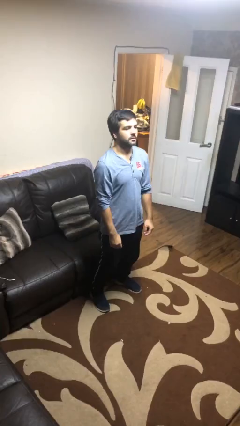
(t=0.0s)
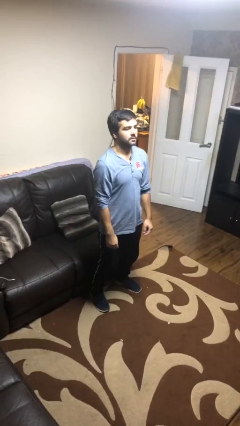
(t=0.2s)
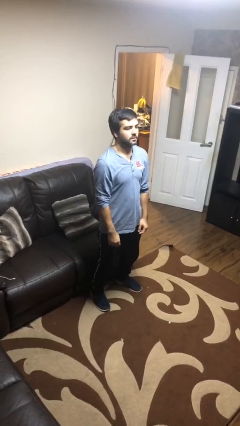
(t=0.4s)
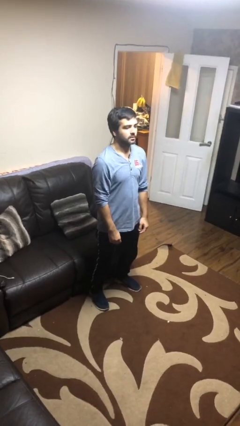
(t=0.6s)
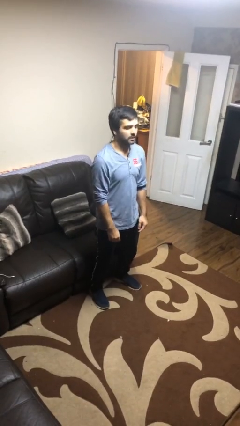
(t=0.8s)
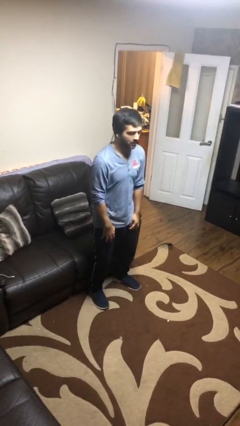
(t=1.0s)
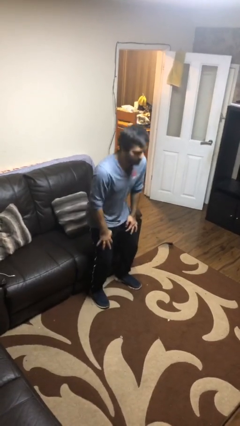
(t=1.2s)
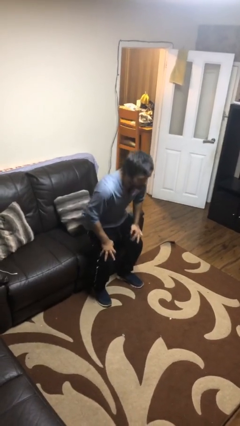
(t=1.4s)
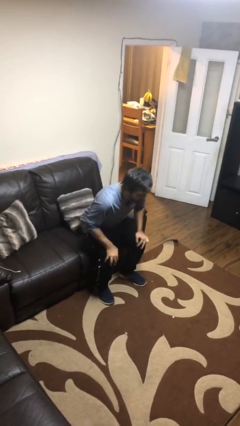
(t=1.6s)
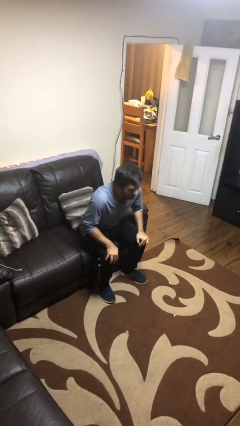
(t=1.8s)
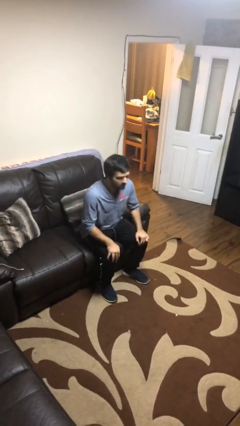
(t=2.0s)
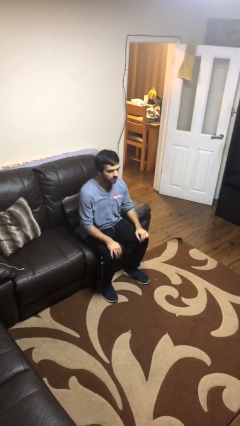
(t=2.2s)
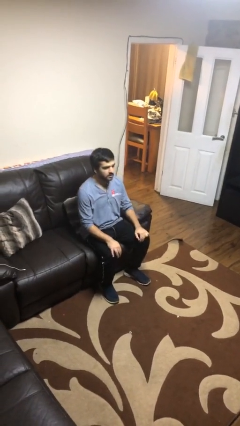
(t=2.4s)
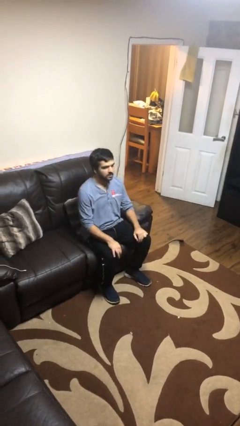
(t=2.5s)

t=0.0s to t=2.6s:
person sits down
